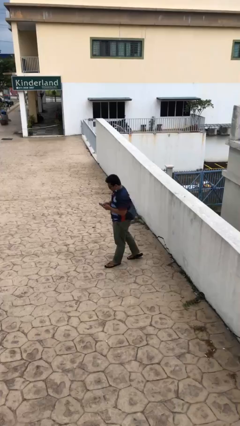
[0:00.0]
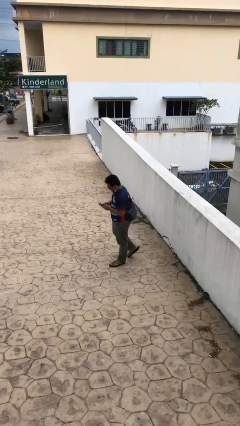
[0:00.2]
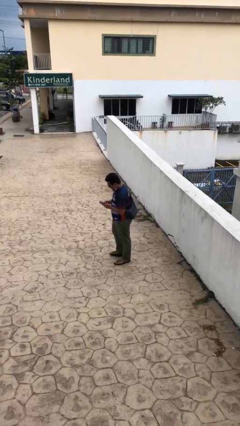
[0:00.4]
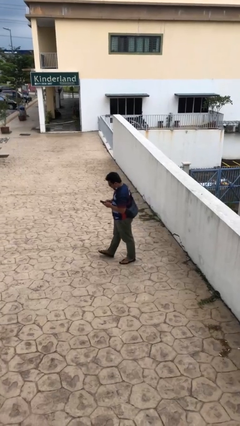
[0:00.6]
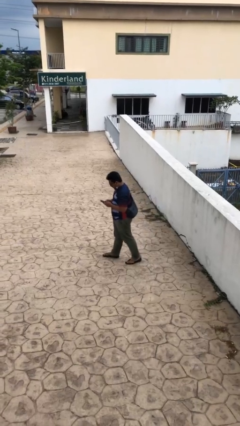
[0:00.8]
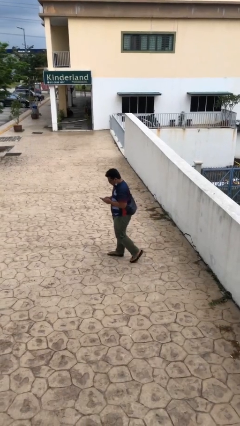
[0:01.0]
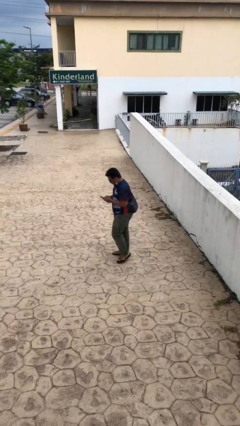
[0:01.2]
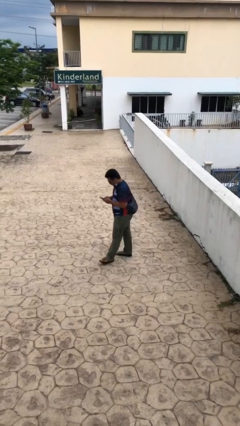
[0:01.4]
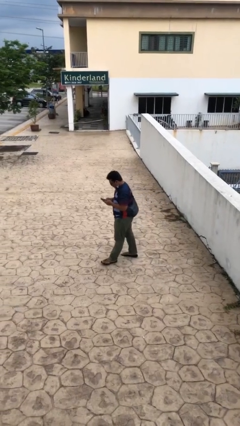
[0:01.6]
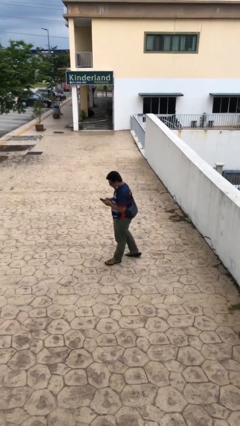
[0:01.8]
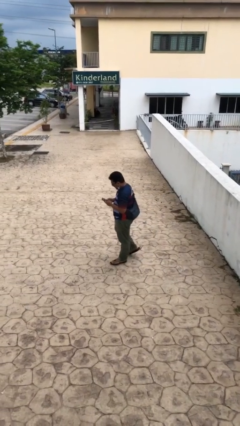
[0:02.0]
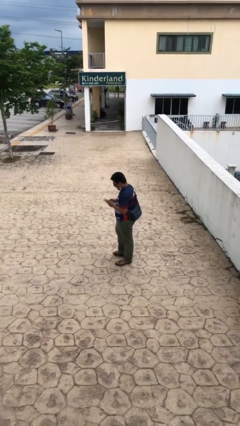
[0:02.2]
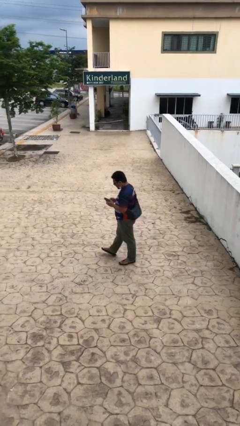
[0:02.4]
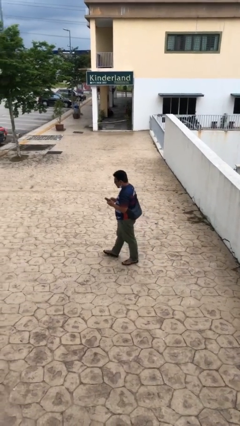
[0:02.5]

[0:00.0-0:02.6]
person texts on phone

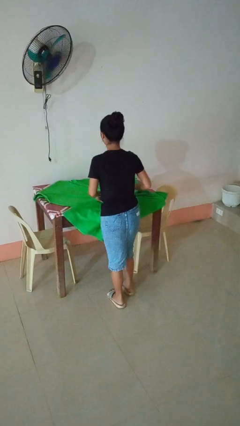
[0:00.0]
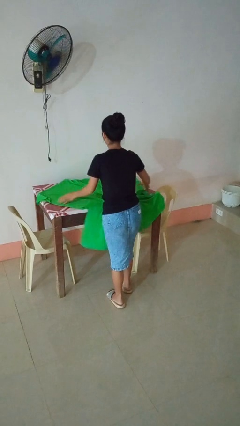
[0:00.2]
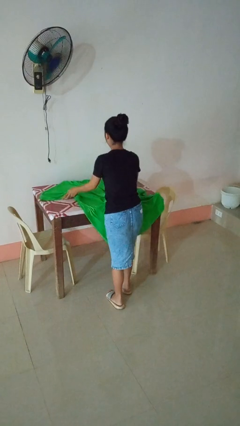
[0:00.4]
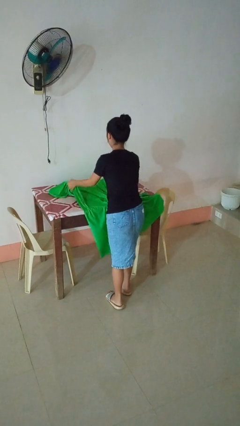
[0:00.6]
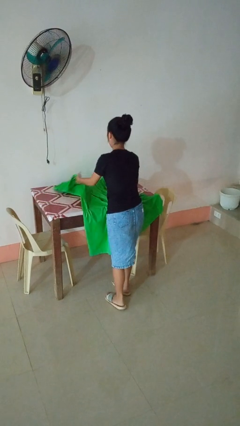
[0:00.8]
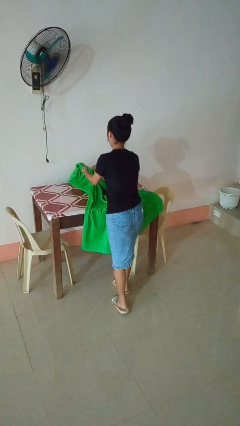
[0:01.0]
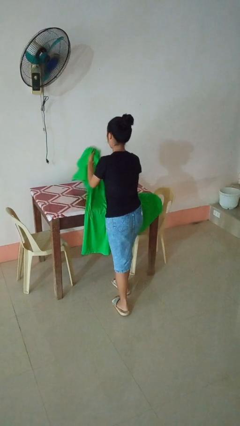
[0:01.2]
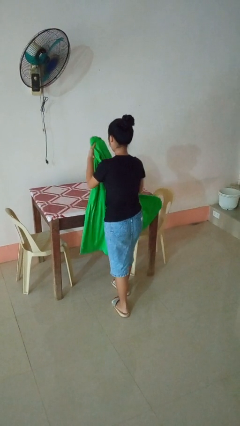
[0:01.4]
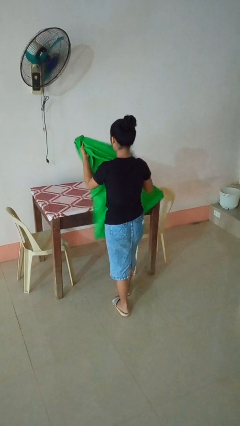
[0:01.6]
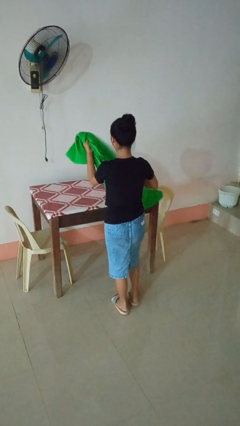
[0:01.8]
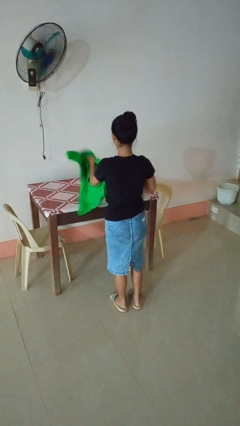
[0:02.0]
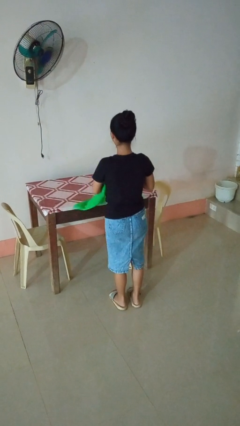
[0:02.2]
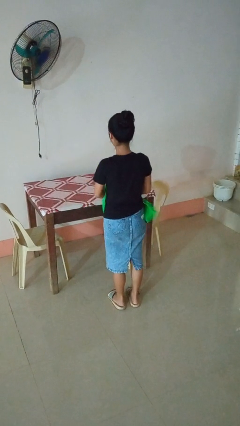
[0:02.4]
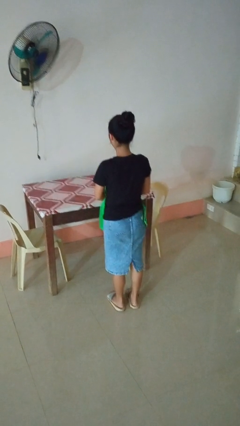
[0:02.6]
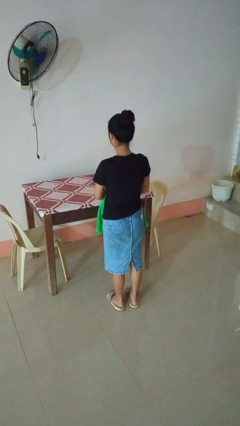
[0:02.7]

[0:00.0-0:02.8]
person folds tablecloth

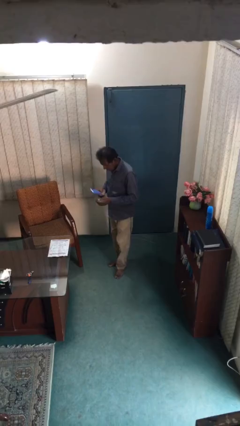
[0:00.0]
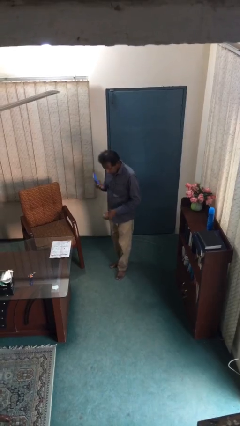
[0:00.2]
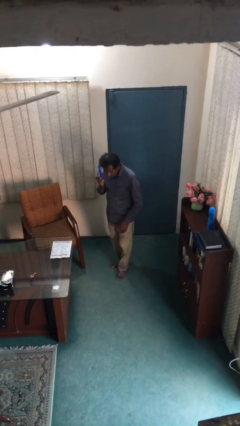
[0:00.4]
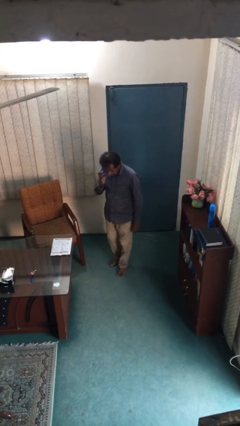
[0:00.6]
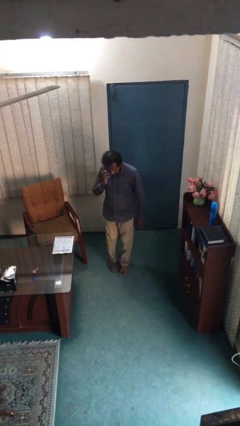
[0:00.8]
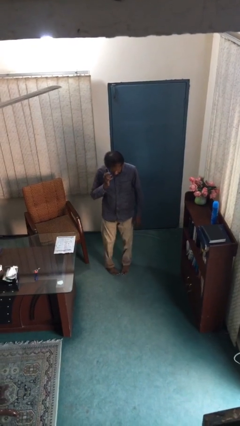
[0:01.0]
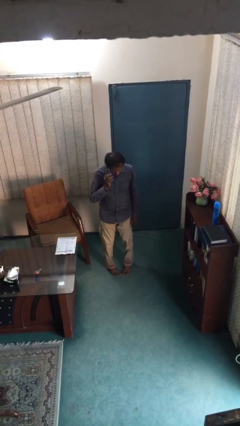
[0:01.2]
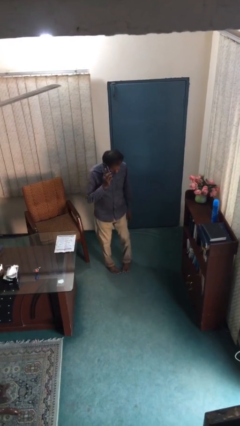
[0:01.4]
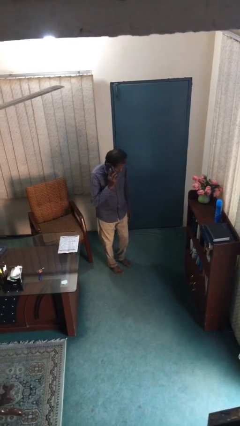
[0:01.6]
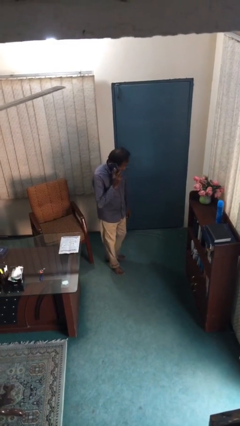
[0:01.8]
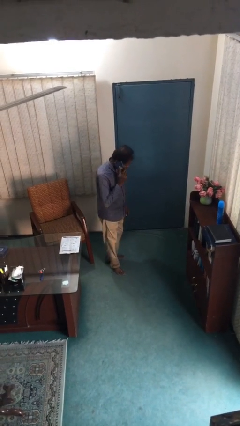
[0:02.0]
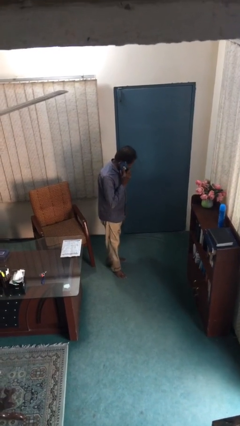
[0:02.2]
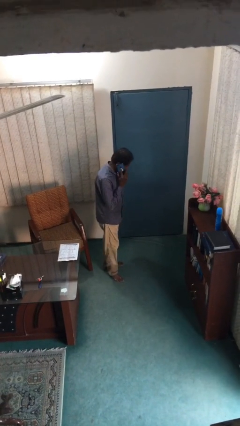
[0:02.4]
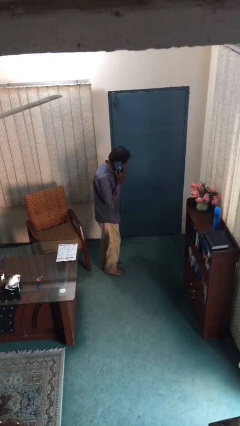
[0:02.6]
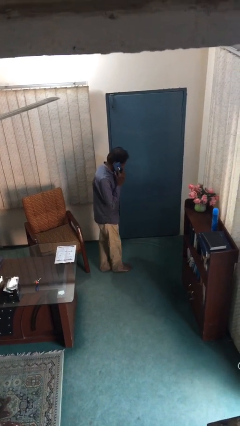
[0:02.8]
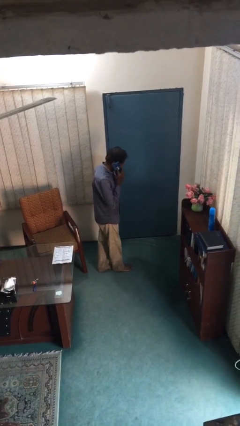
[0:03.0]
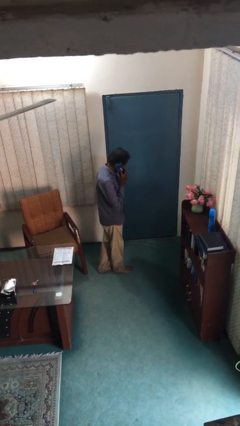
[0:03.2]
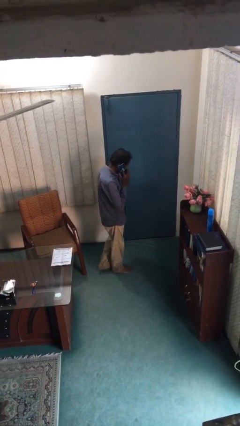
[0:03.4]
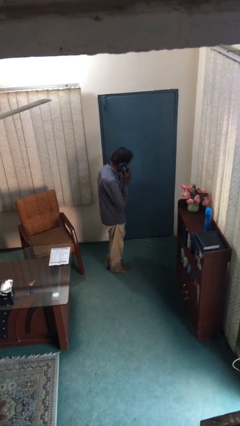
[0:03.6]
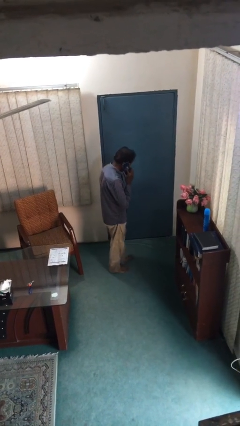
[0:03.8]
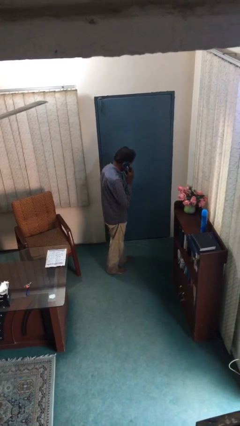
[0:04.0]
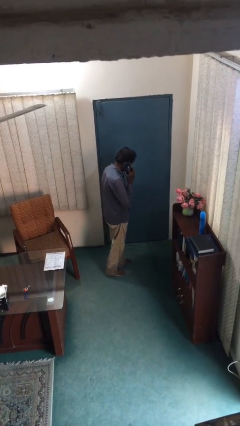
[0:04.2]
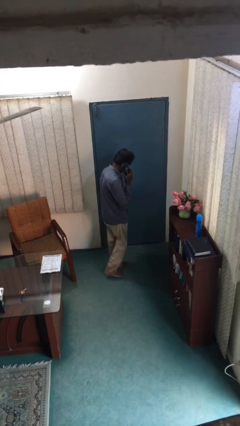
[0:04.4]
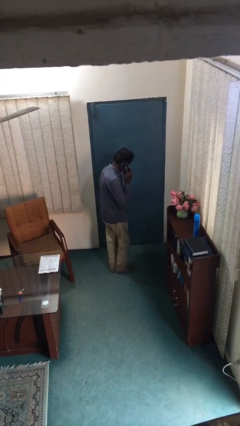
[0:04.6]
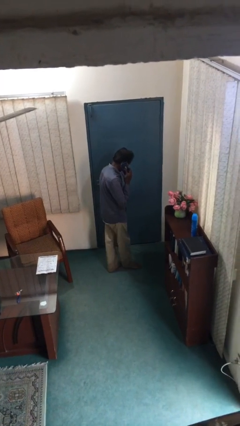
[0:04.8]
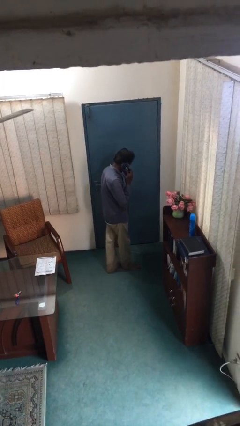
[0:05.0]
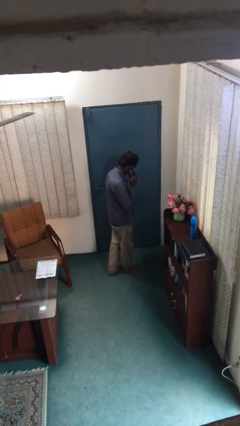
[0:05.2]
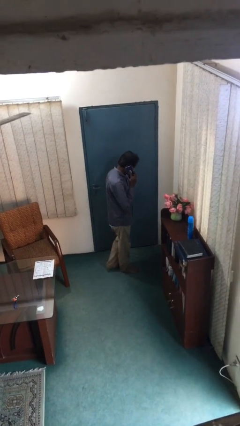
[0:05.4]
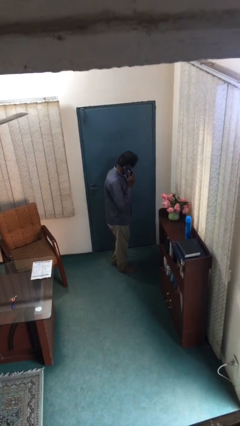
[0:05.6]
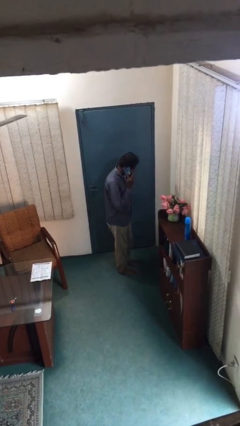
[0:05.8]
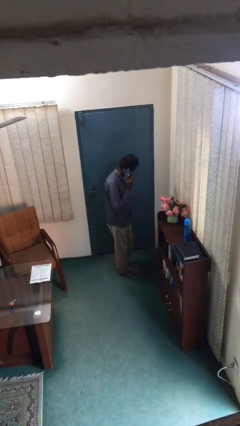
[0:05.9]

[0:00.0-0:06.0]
person talks on phone

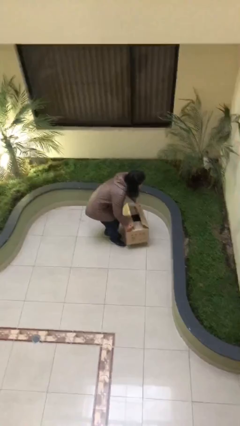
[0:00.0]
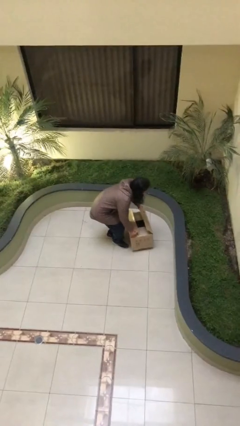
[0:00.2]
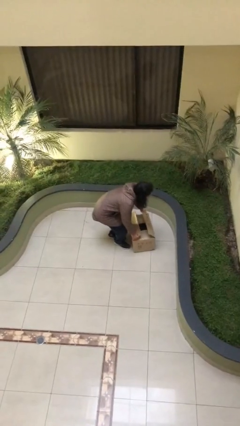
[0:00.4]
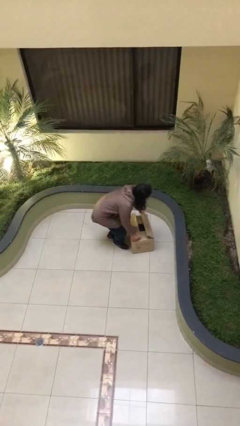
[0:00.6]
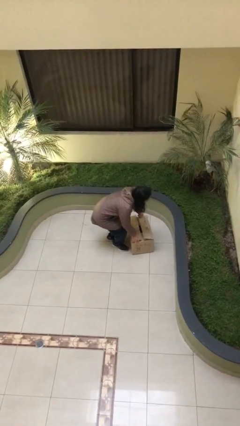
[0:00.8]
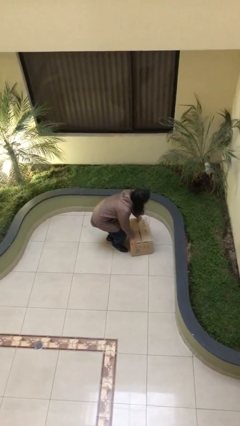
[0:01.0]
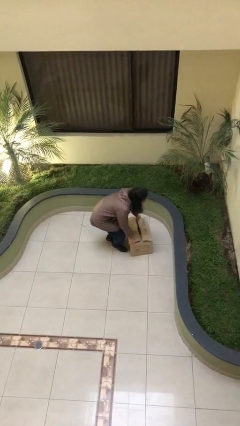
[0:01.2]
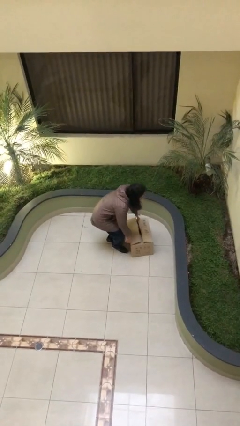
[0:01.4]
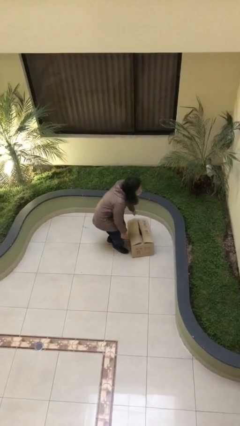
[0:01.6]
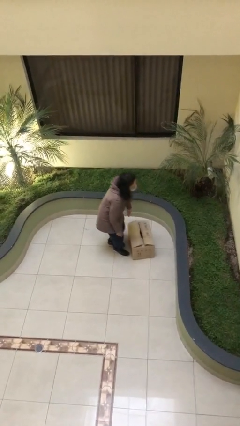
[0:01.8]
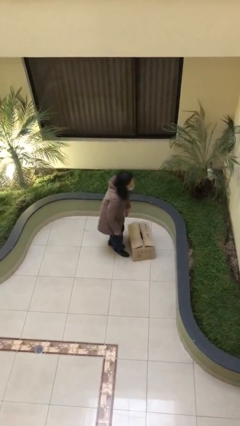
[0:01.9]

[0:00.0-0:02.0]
person puts down object on floor

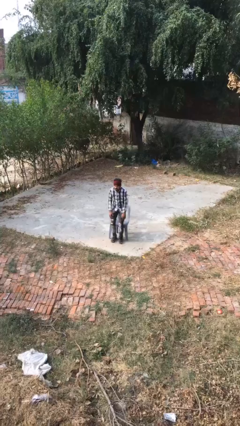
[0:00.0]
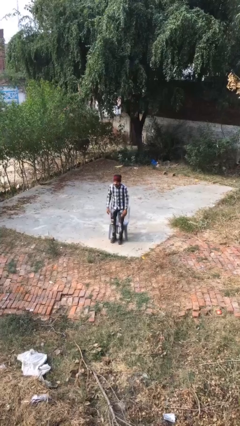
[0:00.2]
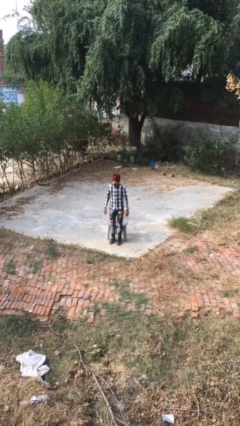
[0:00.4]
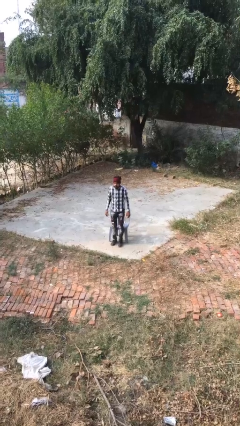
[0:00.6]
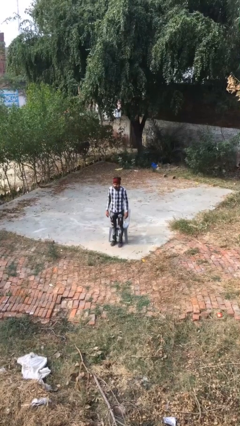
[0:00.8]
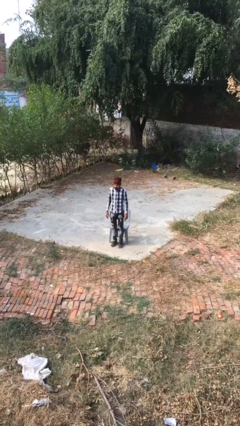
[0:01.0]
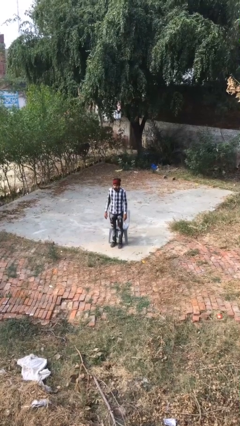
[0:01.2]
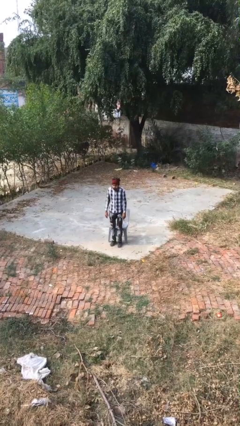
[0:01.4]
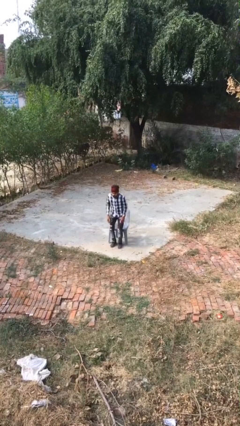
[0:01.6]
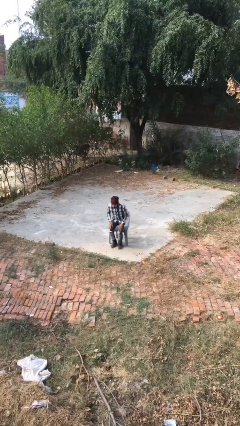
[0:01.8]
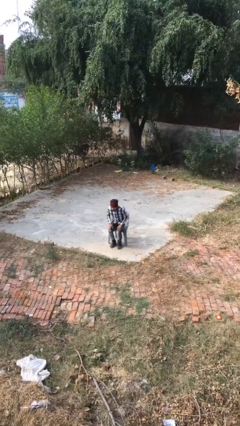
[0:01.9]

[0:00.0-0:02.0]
person stands up

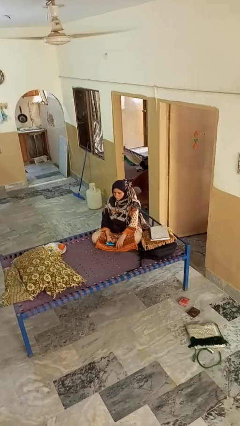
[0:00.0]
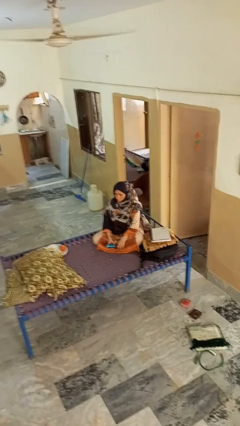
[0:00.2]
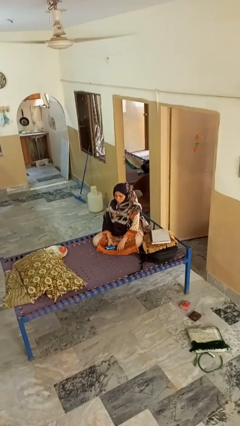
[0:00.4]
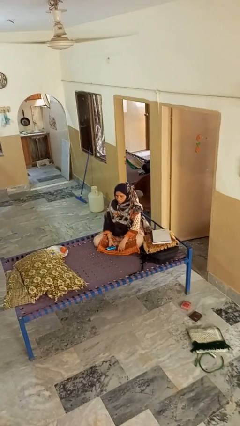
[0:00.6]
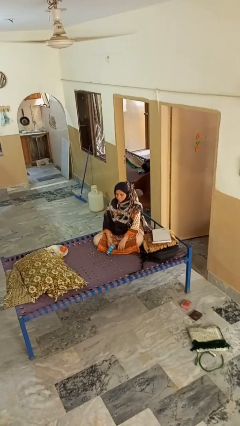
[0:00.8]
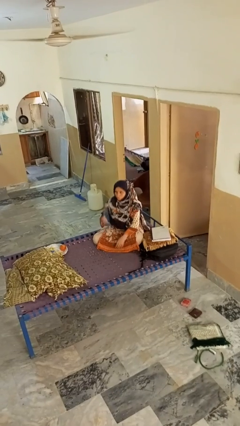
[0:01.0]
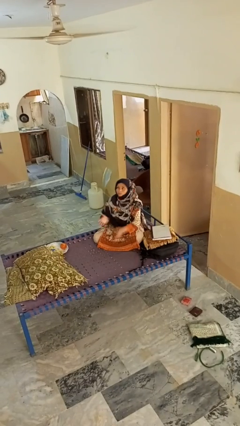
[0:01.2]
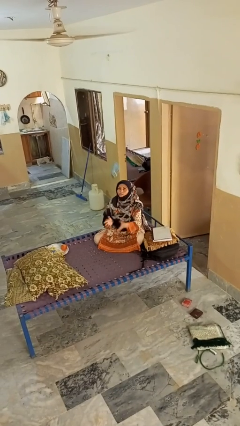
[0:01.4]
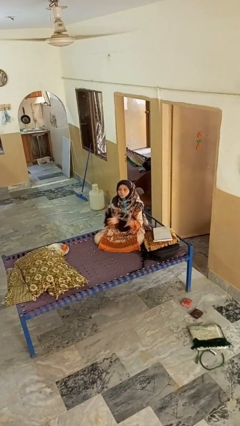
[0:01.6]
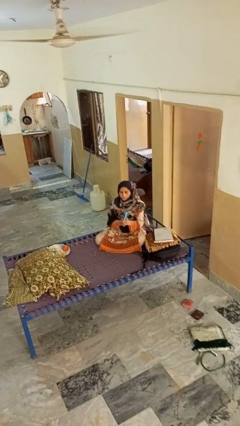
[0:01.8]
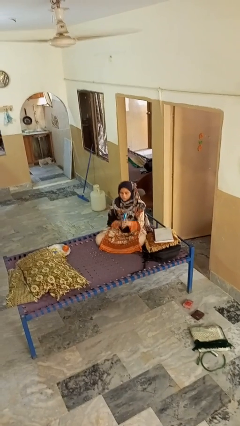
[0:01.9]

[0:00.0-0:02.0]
person drops object
